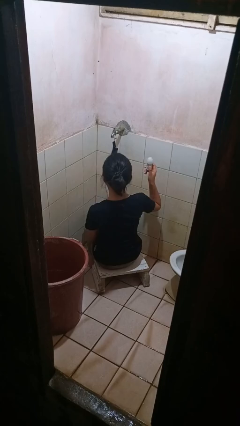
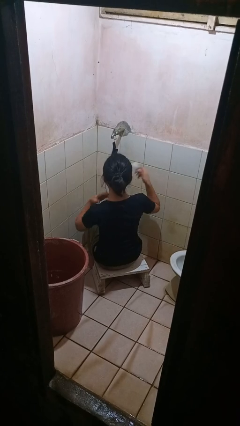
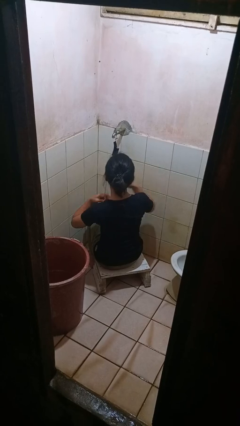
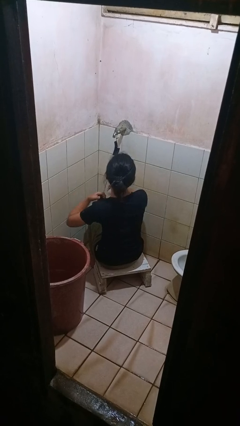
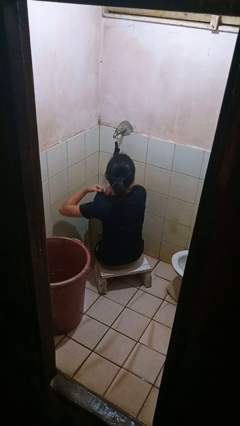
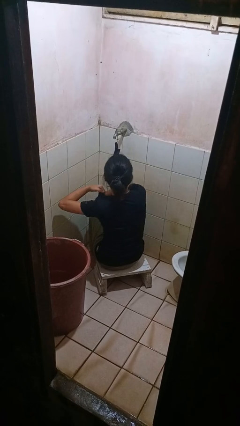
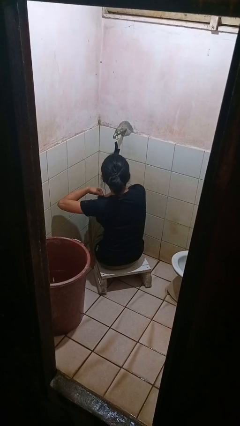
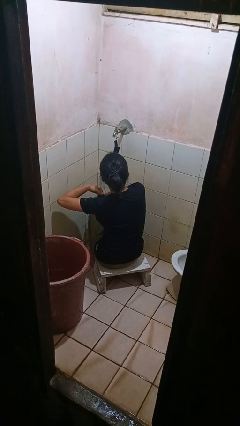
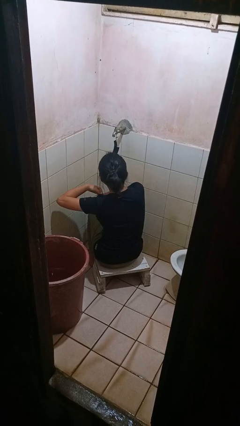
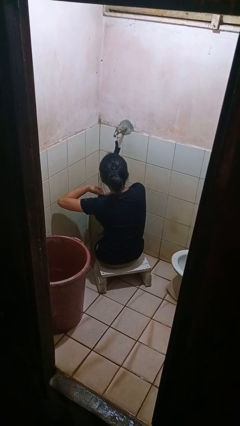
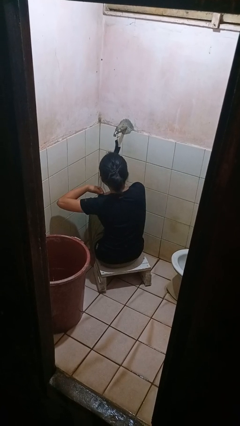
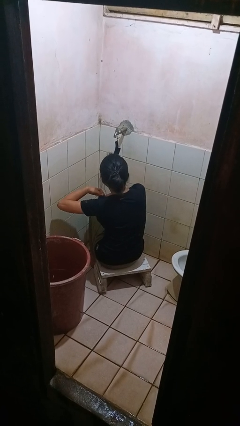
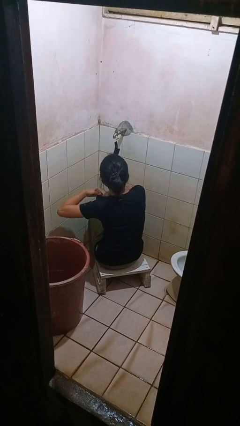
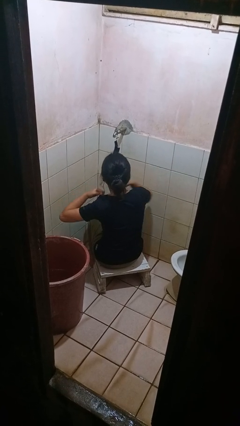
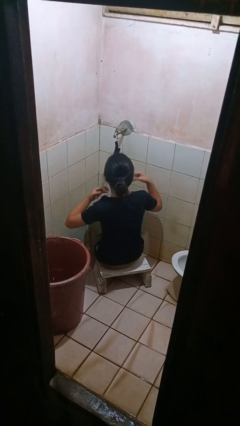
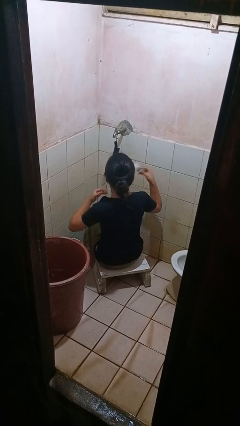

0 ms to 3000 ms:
person applies deodorant

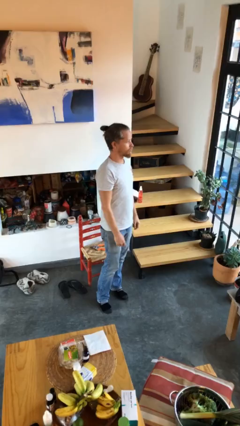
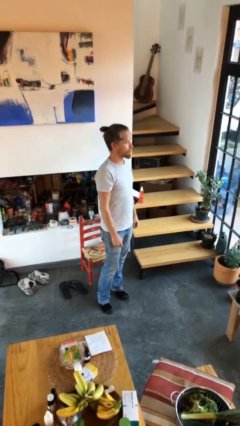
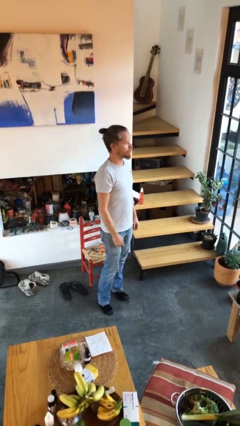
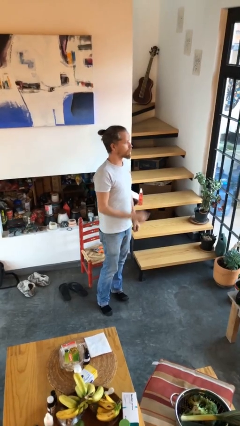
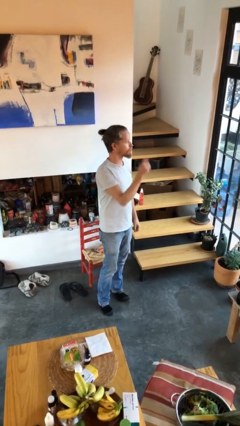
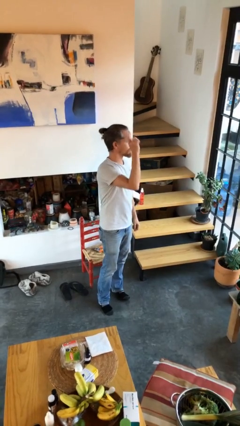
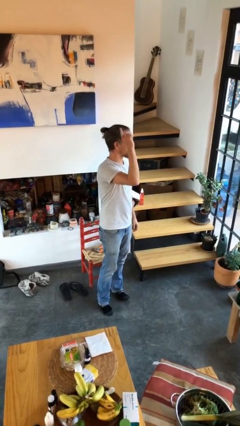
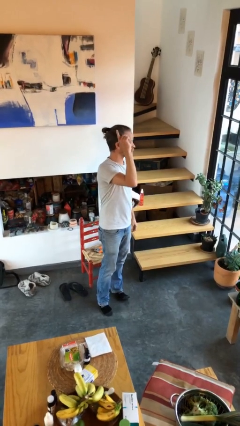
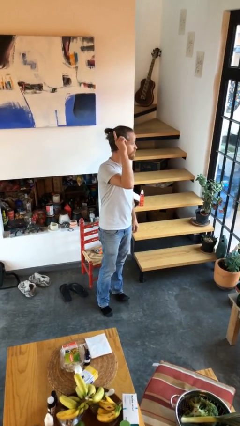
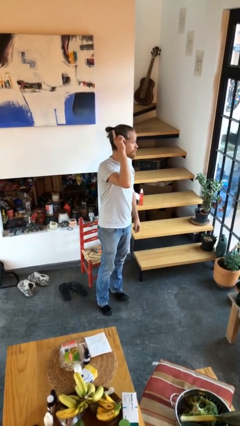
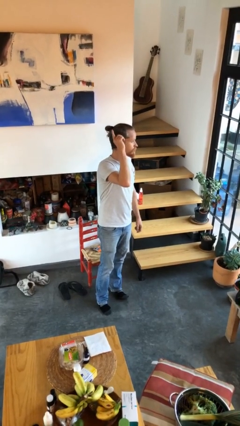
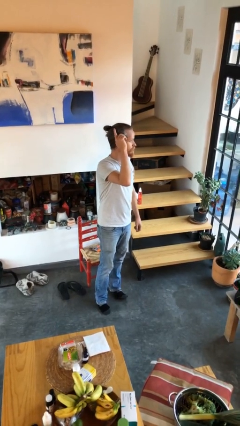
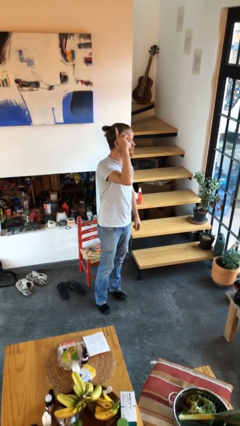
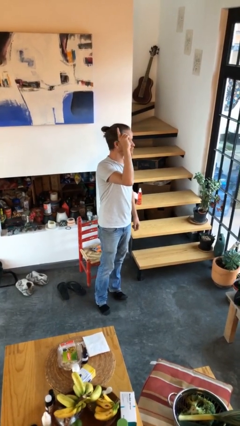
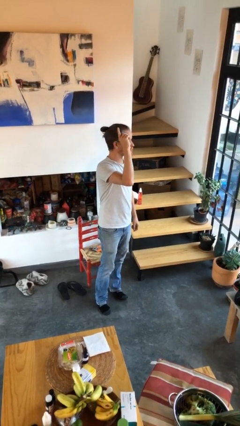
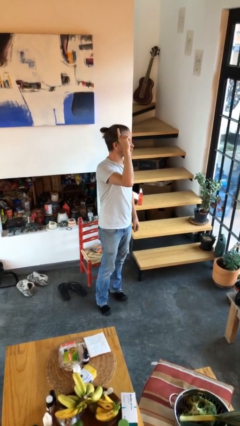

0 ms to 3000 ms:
person gestures raise hand

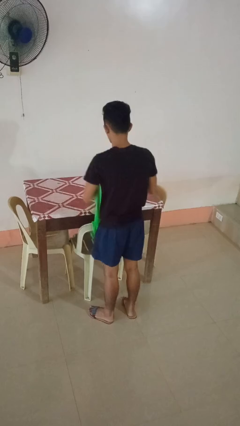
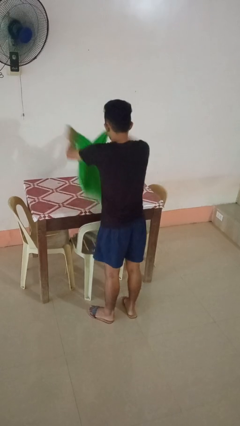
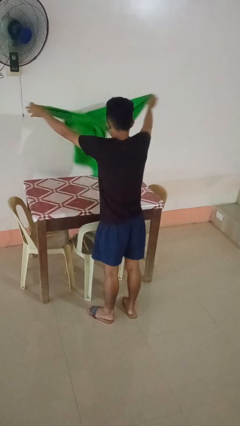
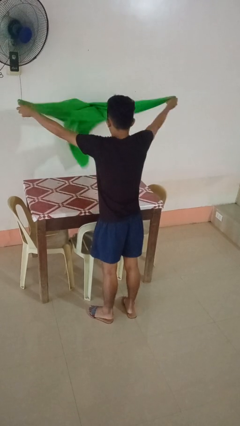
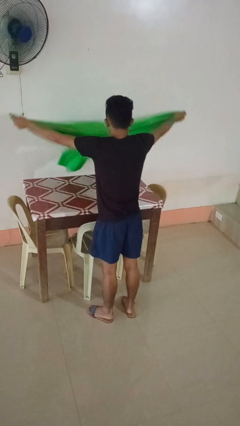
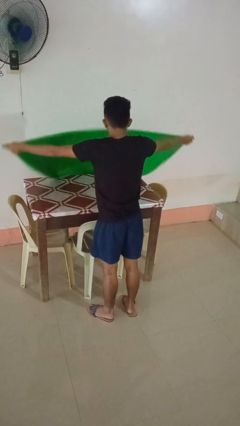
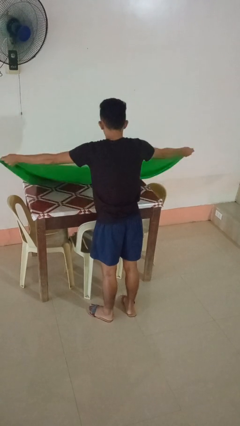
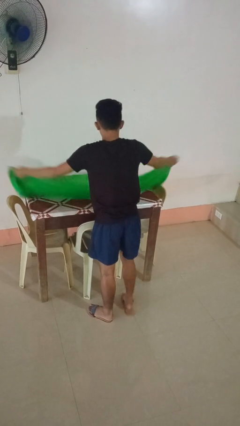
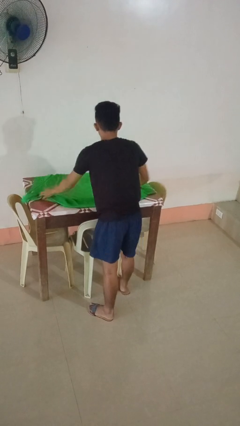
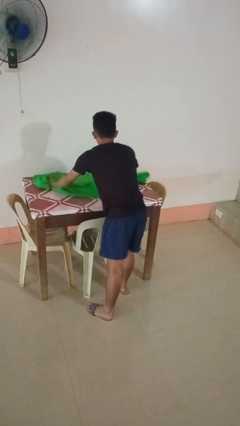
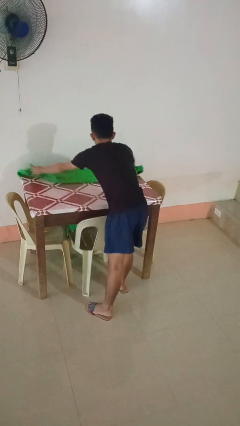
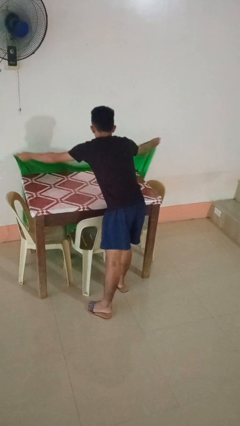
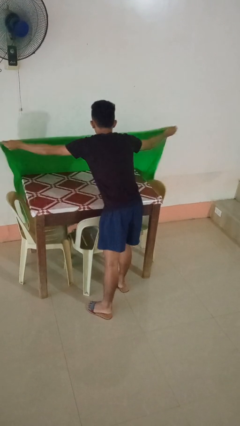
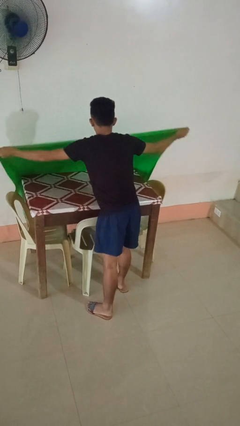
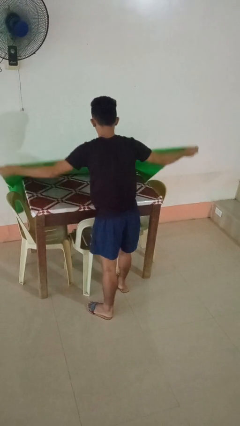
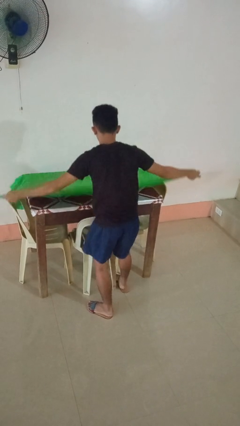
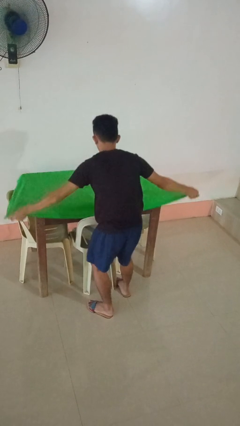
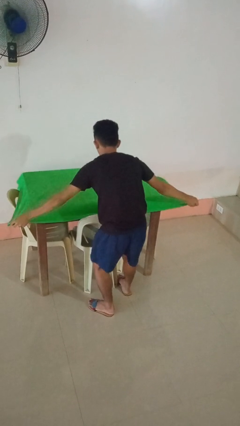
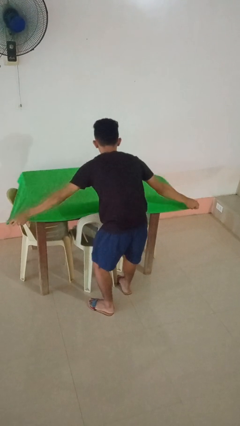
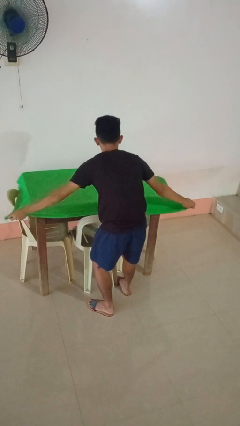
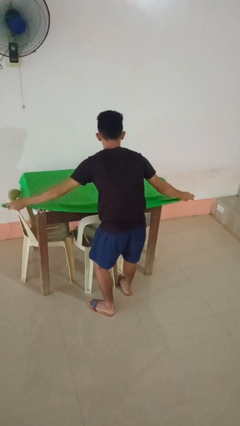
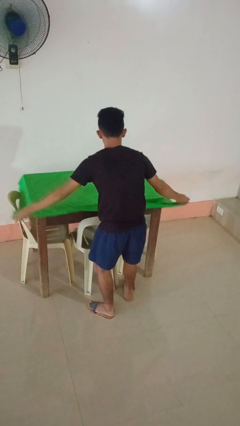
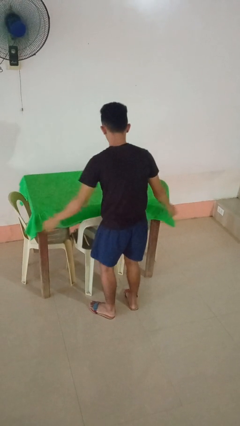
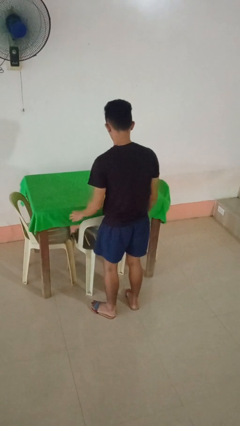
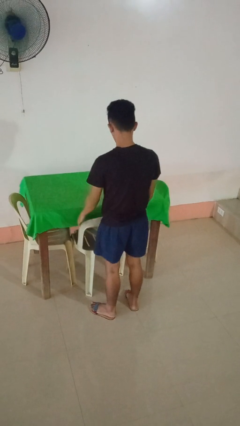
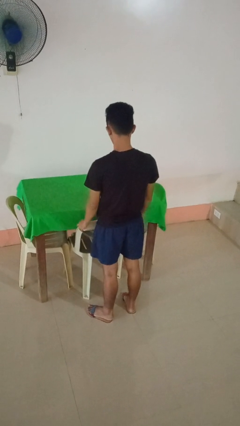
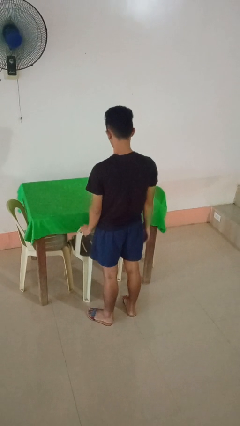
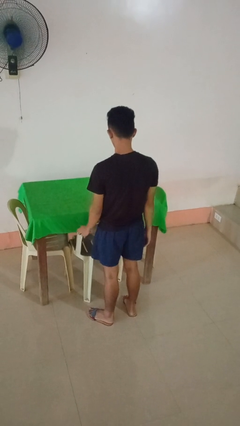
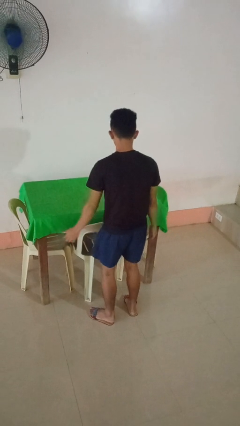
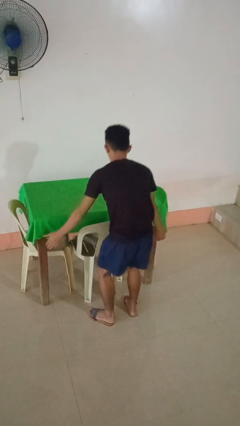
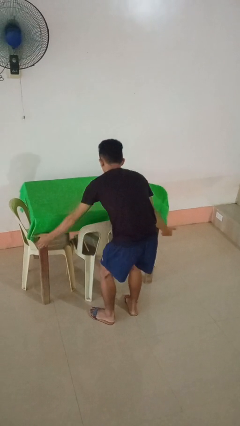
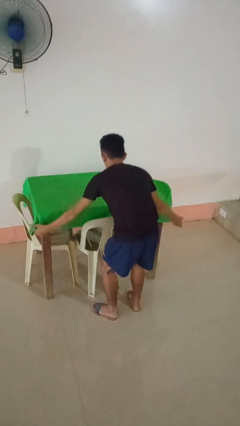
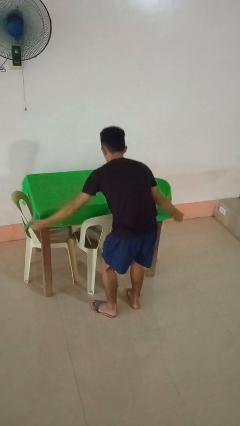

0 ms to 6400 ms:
person spreads tablecloth

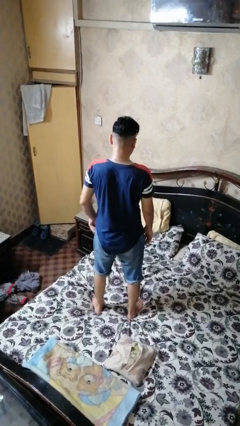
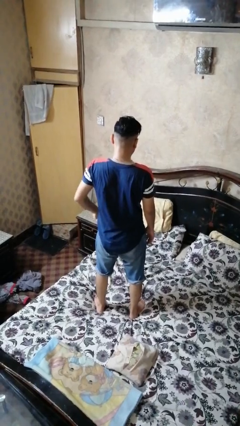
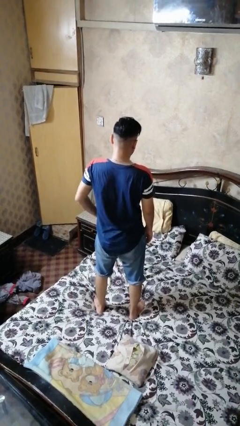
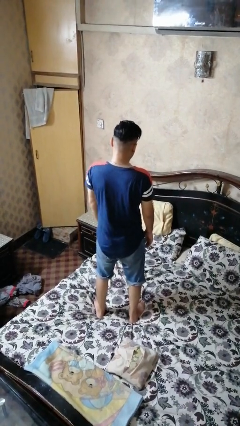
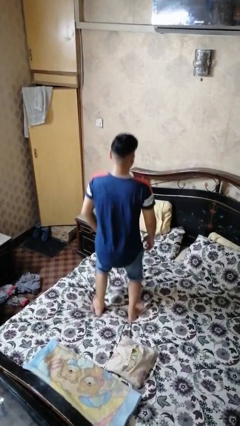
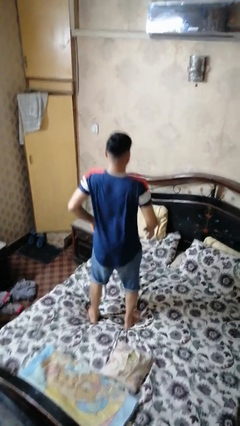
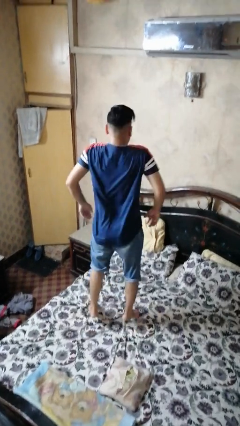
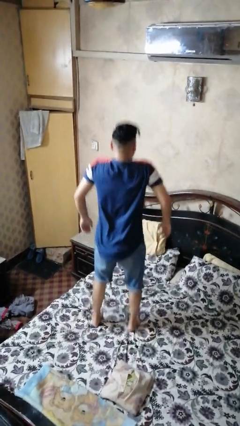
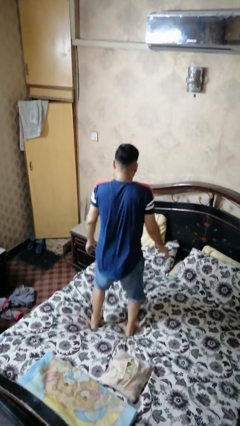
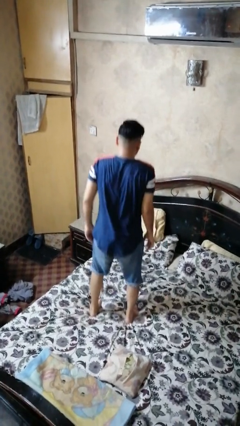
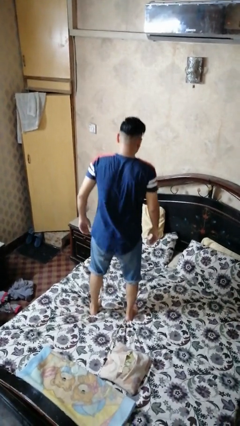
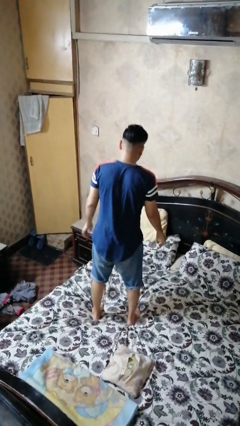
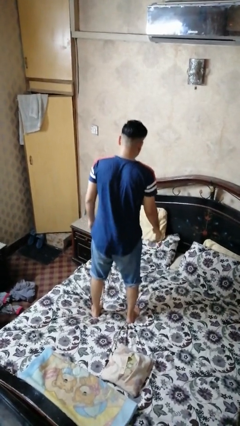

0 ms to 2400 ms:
person jumps on bed

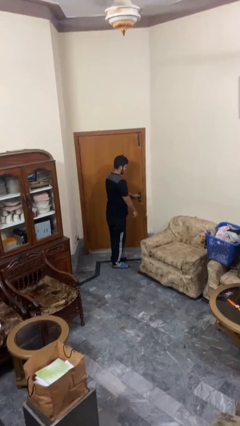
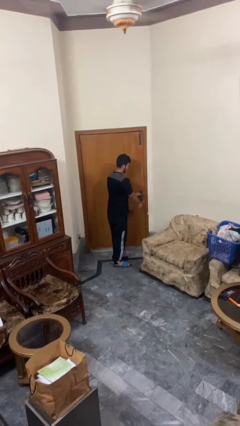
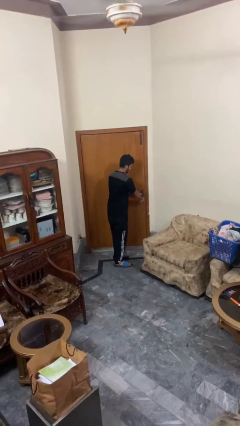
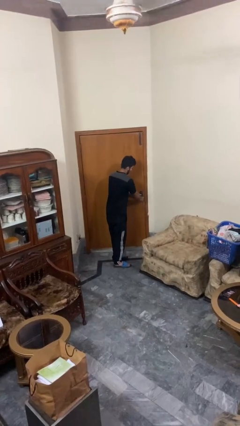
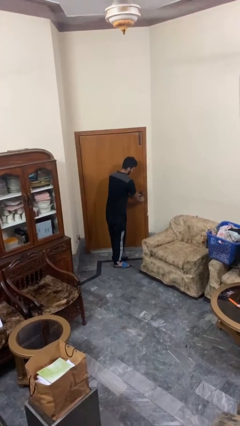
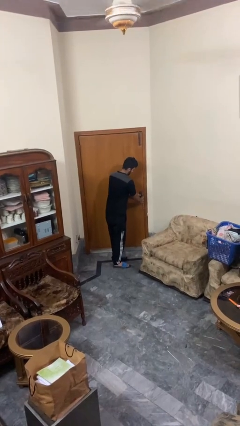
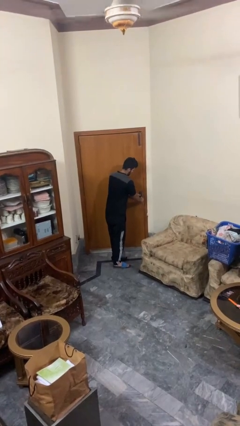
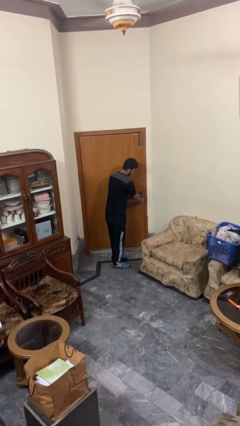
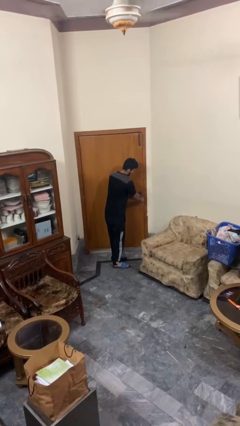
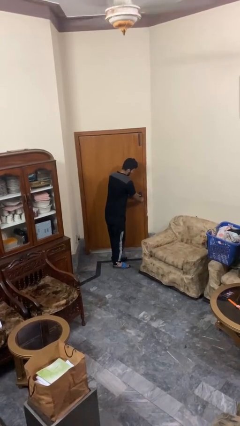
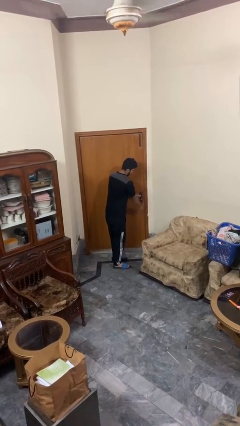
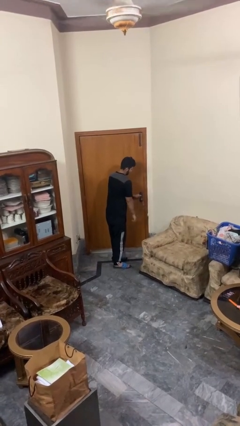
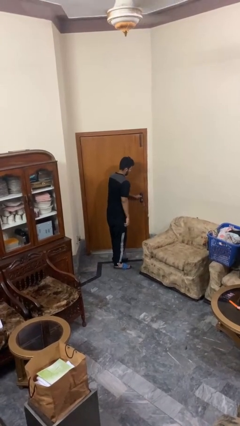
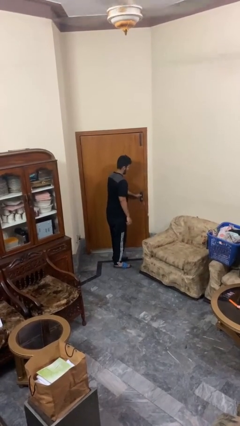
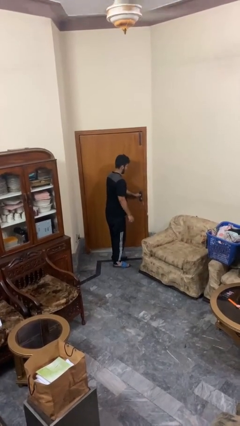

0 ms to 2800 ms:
person unlocks door with keys
